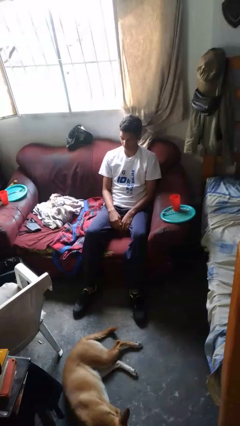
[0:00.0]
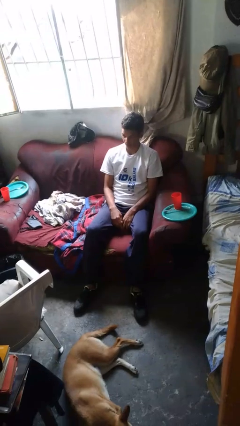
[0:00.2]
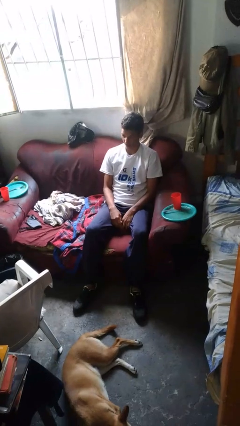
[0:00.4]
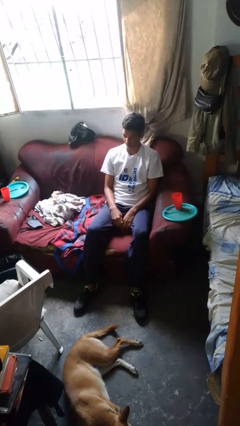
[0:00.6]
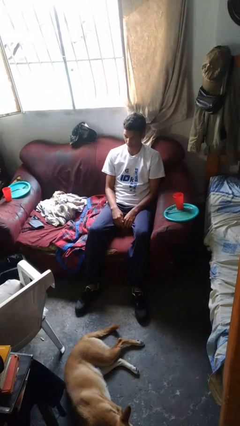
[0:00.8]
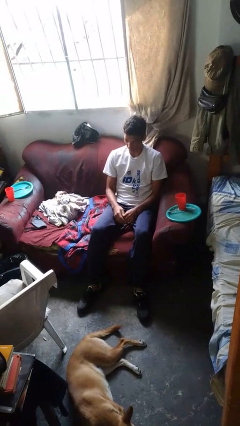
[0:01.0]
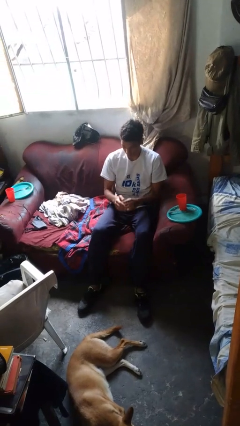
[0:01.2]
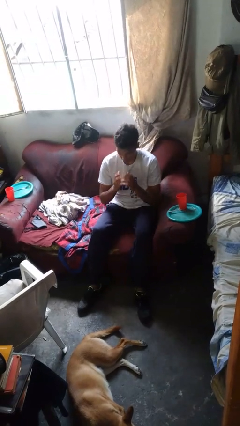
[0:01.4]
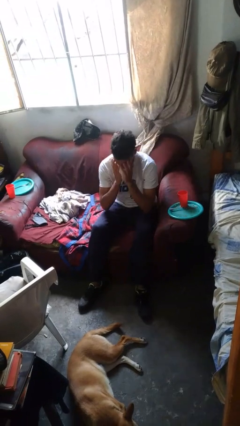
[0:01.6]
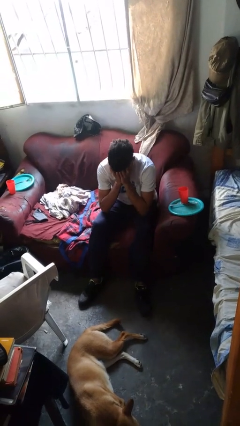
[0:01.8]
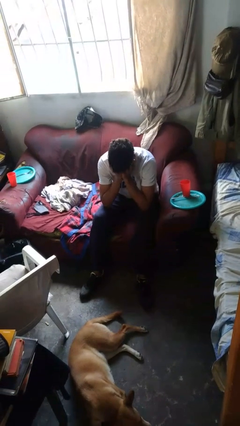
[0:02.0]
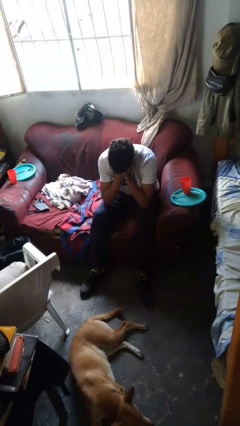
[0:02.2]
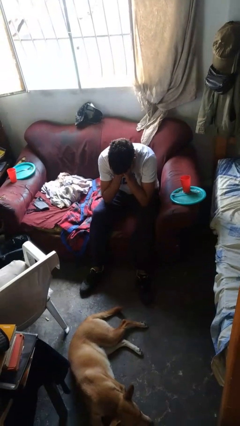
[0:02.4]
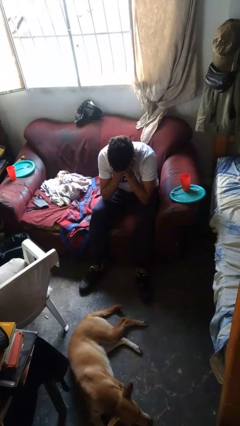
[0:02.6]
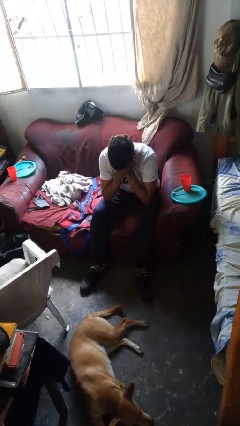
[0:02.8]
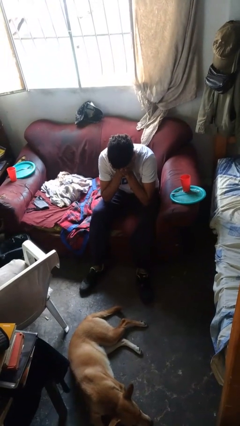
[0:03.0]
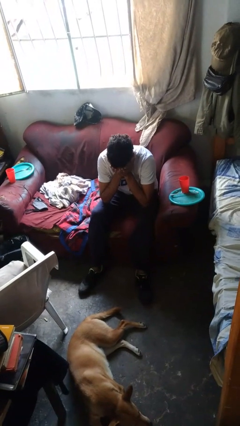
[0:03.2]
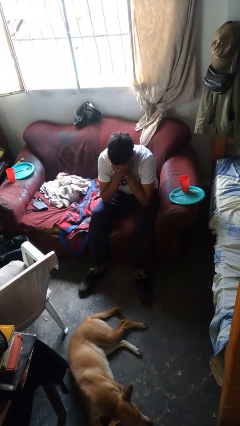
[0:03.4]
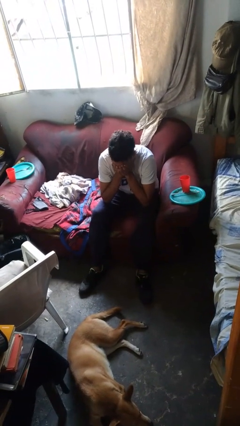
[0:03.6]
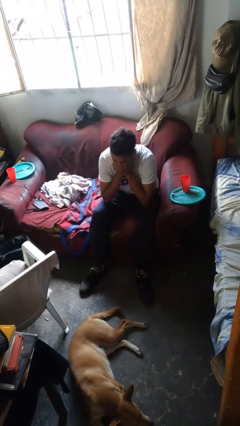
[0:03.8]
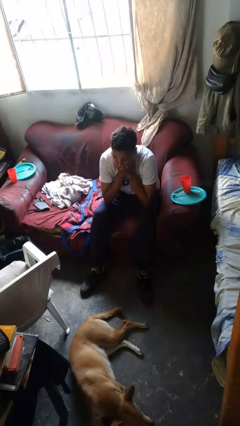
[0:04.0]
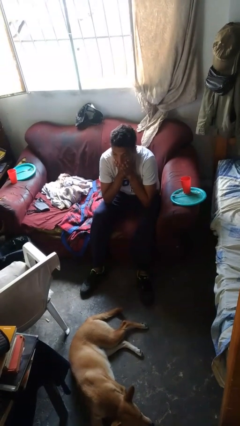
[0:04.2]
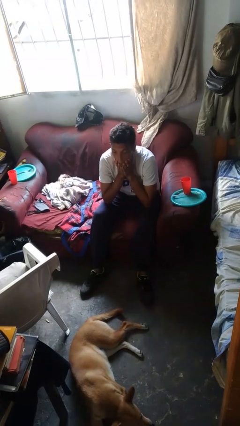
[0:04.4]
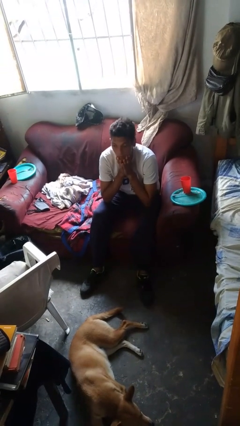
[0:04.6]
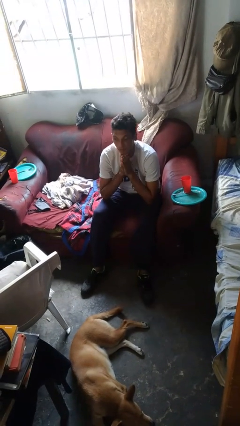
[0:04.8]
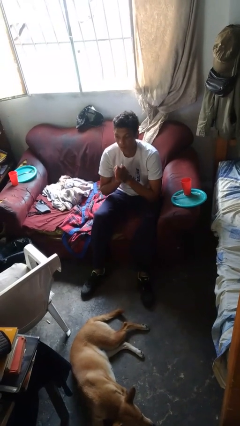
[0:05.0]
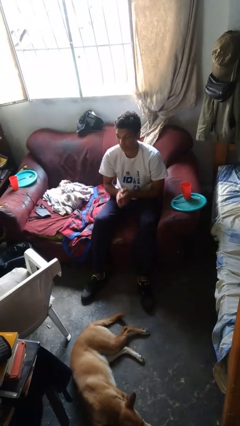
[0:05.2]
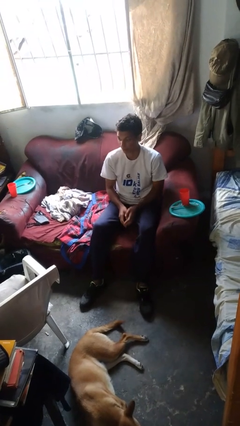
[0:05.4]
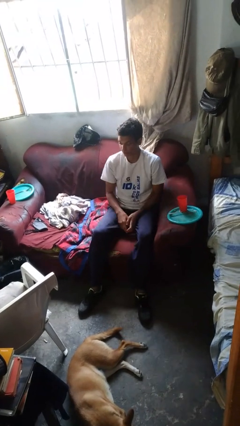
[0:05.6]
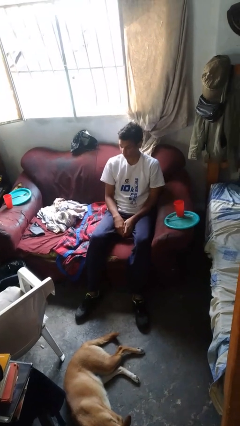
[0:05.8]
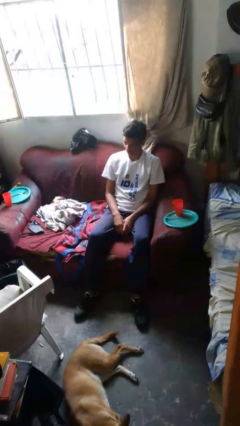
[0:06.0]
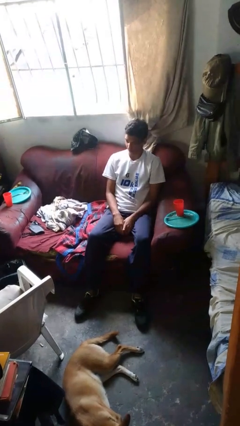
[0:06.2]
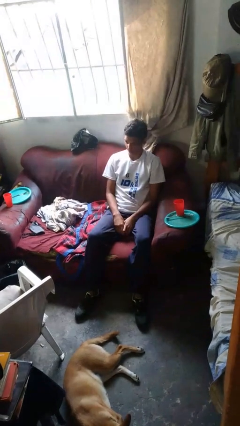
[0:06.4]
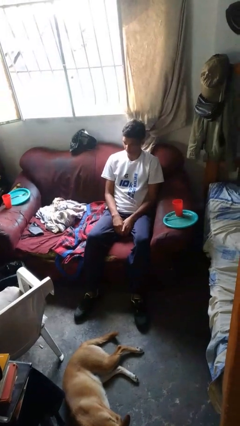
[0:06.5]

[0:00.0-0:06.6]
person covers face with hands

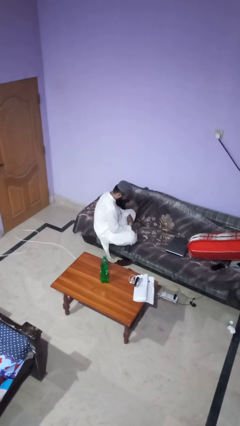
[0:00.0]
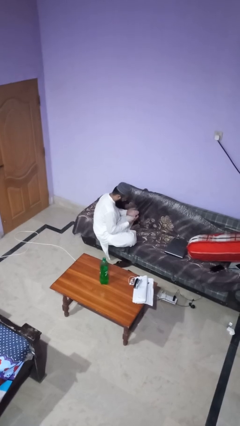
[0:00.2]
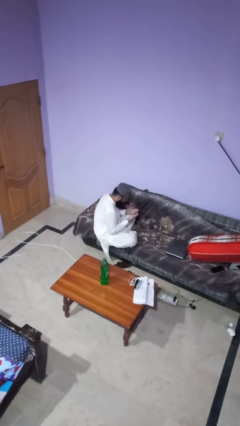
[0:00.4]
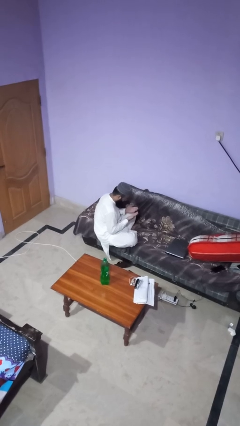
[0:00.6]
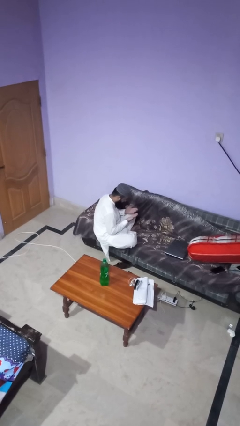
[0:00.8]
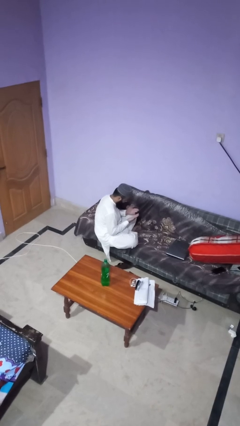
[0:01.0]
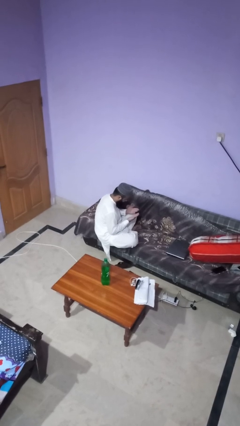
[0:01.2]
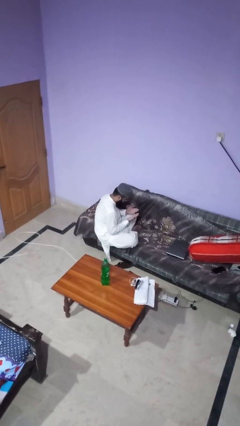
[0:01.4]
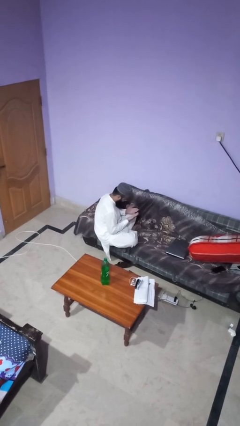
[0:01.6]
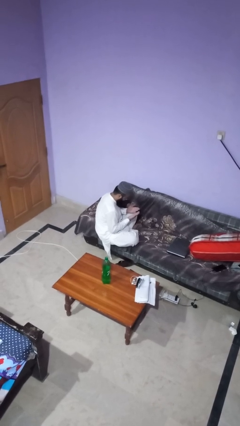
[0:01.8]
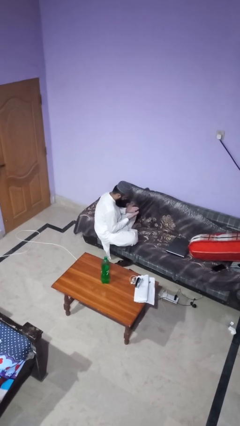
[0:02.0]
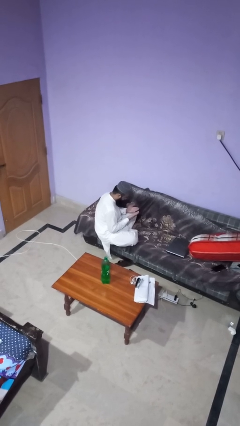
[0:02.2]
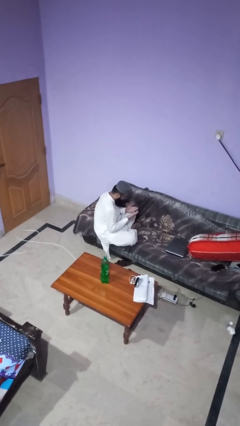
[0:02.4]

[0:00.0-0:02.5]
person looks at hands in lap

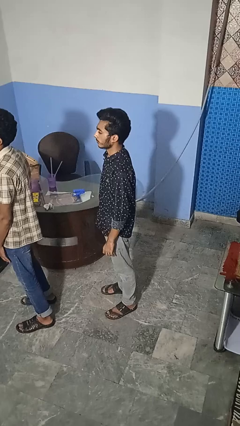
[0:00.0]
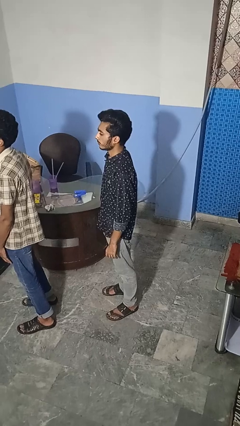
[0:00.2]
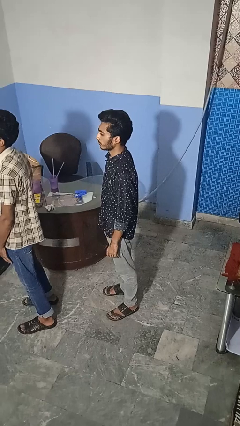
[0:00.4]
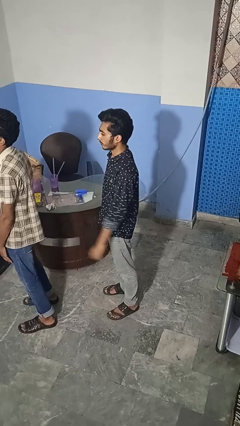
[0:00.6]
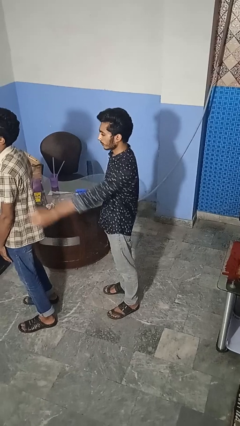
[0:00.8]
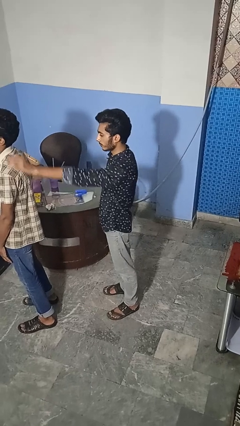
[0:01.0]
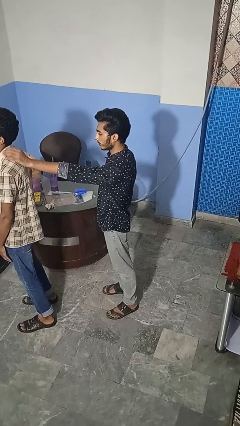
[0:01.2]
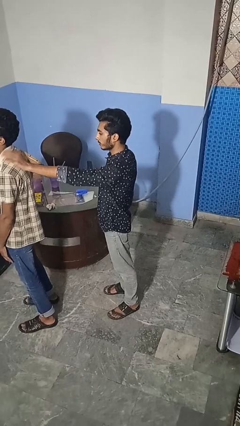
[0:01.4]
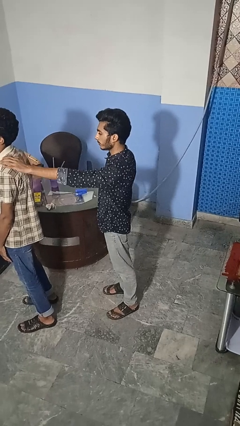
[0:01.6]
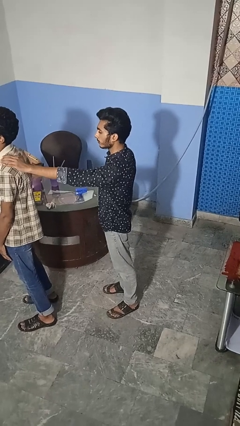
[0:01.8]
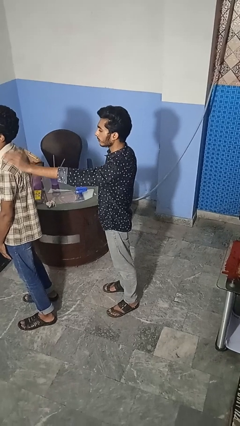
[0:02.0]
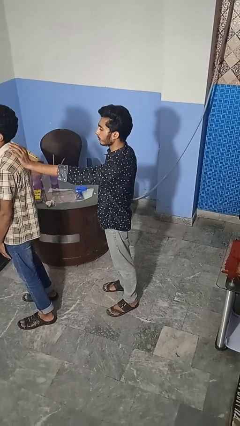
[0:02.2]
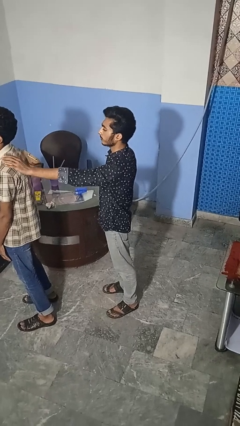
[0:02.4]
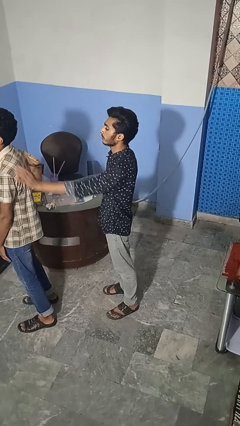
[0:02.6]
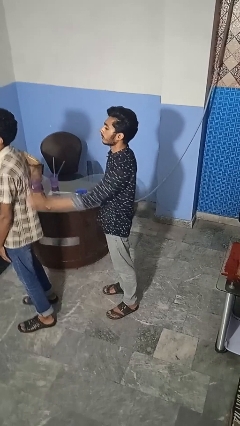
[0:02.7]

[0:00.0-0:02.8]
person touches back of person

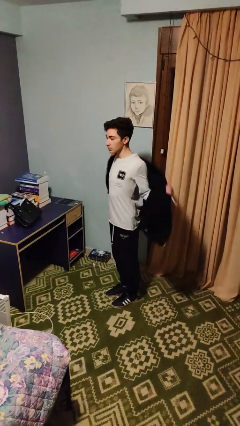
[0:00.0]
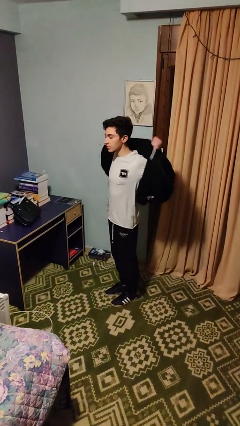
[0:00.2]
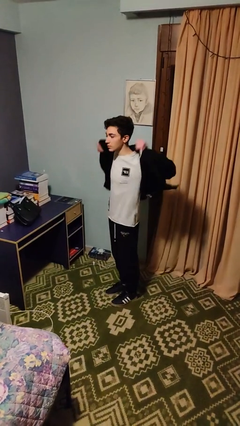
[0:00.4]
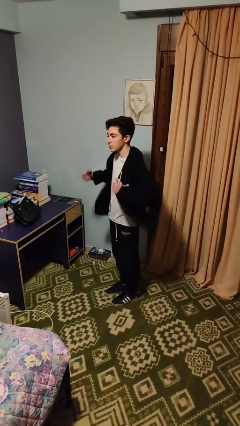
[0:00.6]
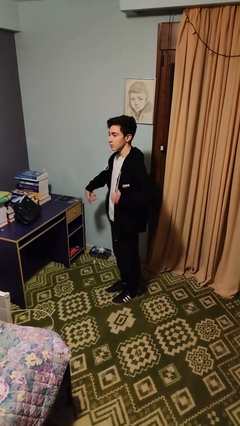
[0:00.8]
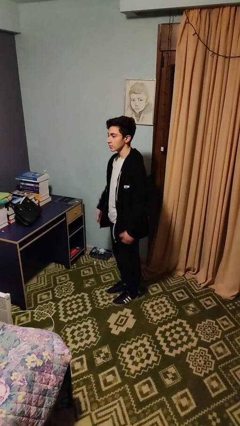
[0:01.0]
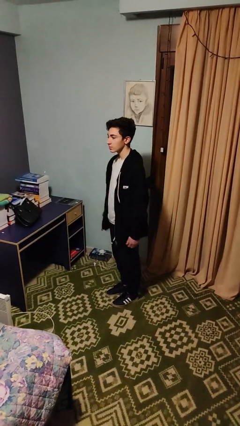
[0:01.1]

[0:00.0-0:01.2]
person puts on jacket

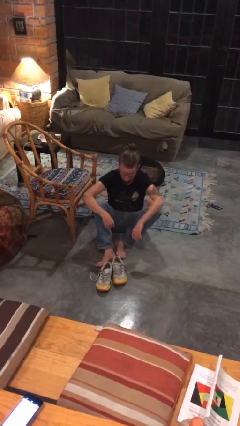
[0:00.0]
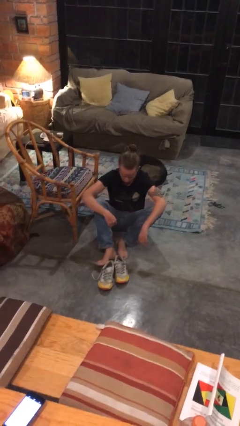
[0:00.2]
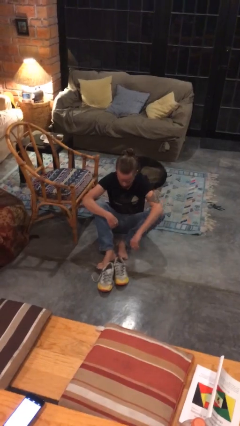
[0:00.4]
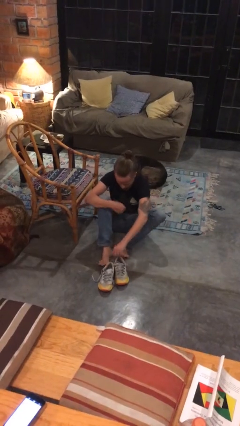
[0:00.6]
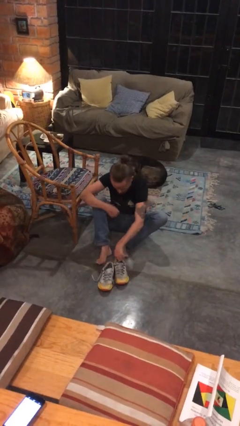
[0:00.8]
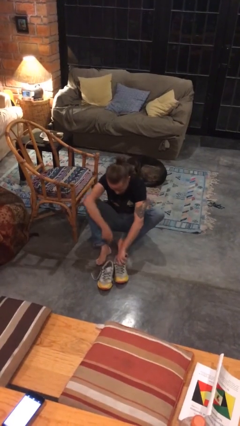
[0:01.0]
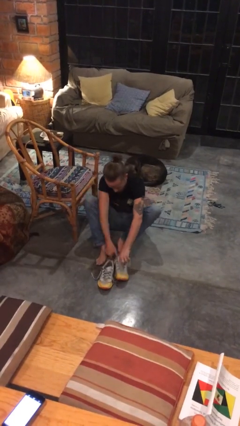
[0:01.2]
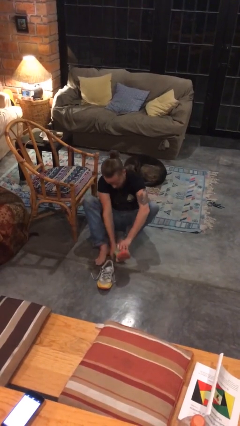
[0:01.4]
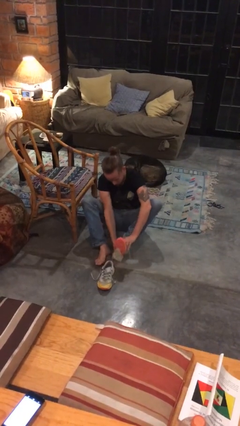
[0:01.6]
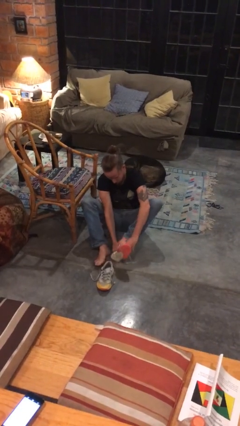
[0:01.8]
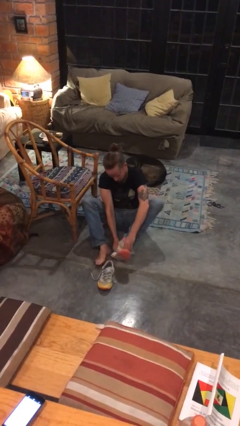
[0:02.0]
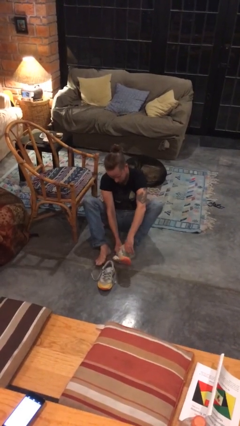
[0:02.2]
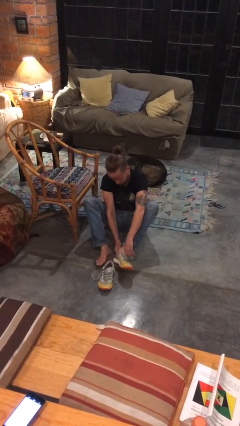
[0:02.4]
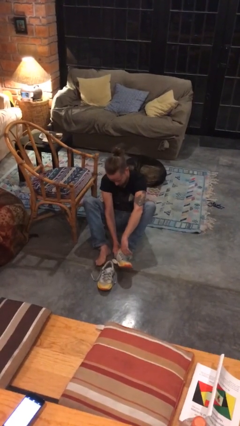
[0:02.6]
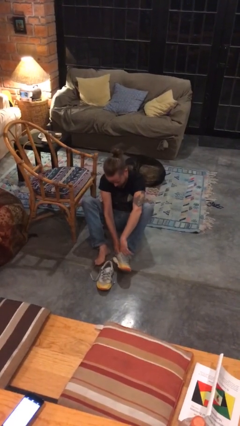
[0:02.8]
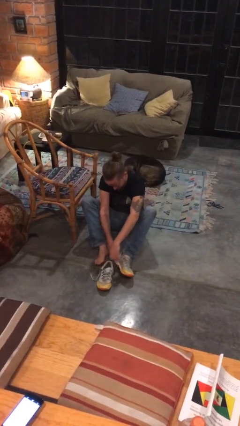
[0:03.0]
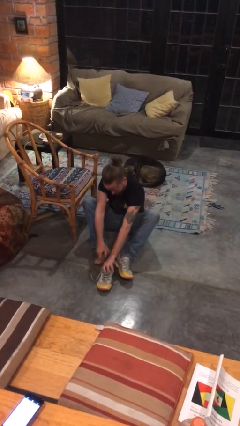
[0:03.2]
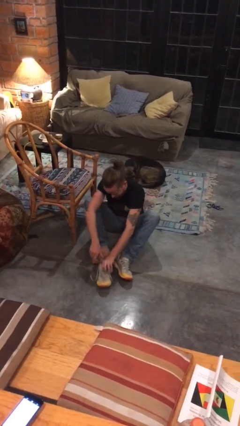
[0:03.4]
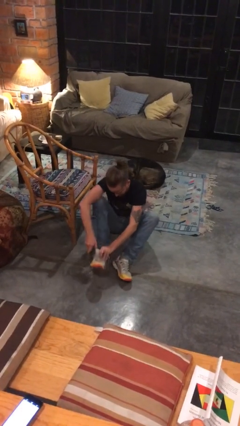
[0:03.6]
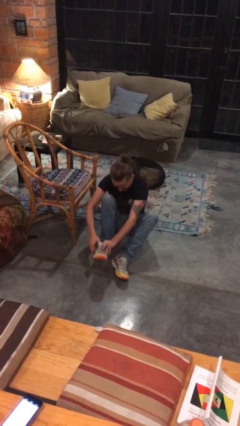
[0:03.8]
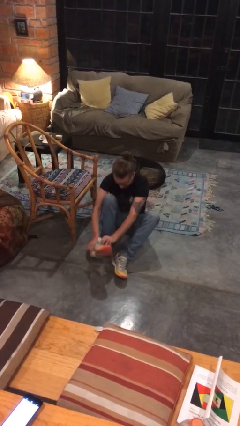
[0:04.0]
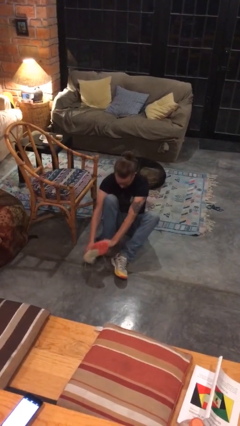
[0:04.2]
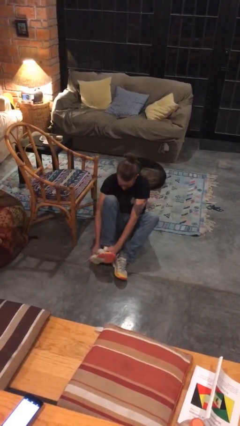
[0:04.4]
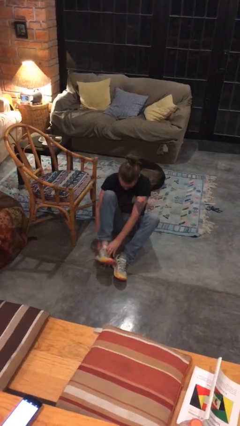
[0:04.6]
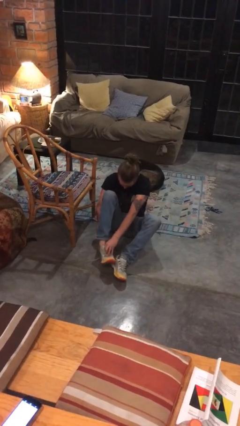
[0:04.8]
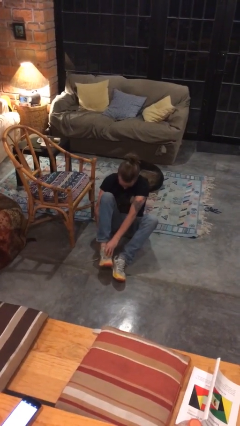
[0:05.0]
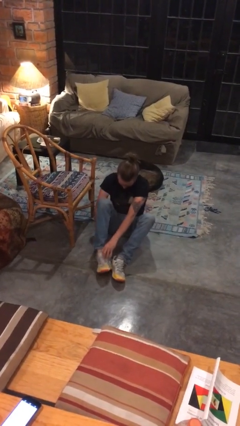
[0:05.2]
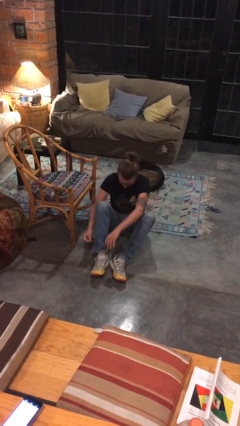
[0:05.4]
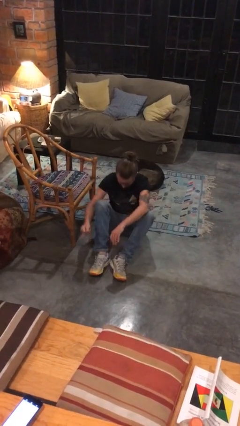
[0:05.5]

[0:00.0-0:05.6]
person puts on shoes
